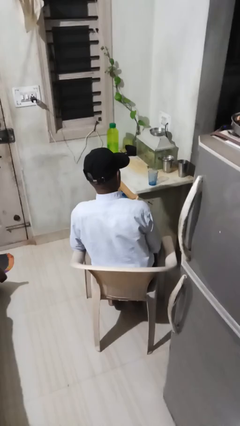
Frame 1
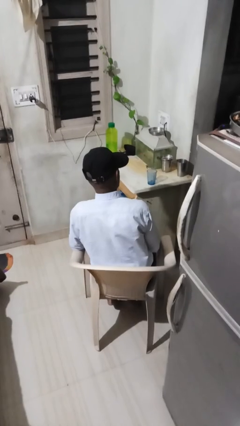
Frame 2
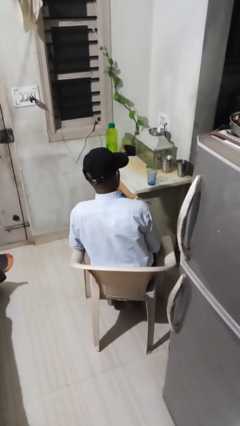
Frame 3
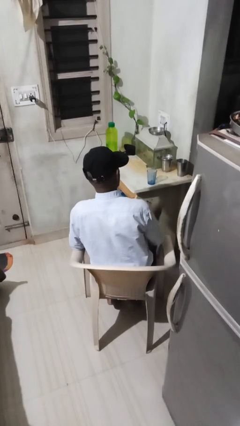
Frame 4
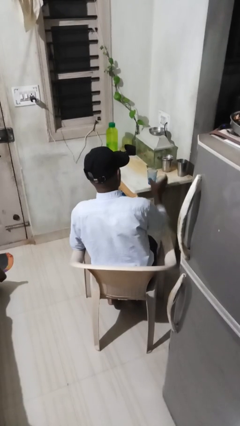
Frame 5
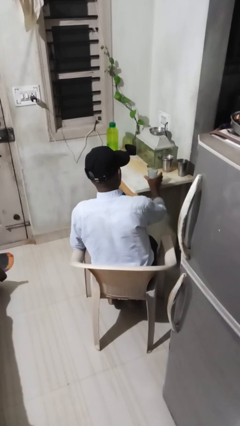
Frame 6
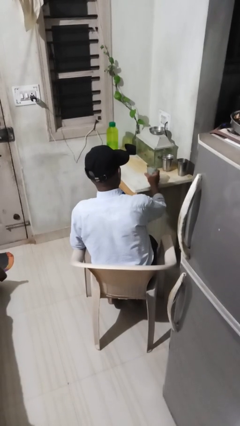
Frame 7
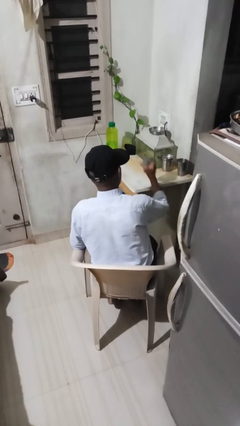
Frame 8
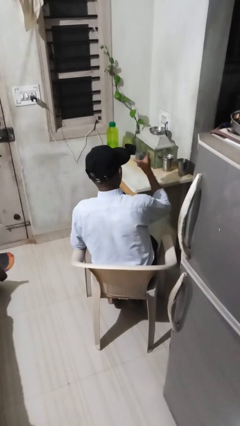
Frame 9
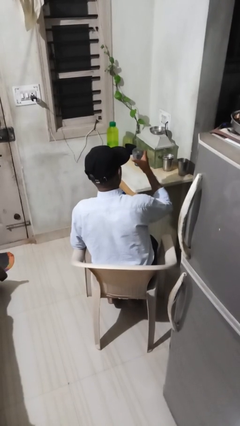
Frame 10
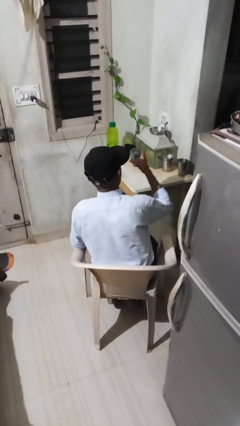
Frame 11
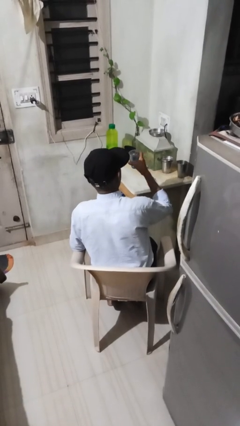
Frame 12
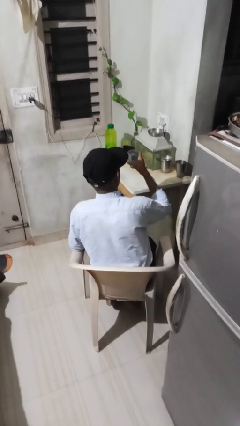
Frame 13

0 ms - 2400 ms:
person picks up object from table

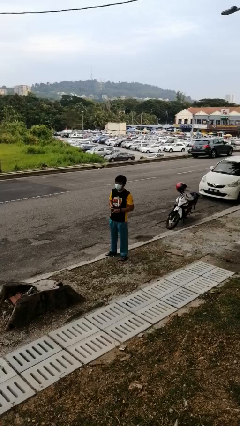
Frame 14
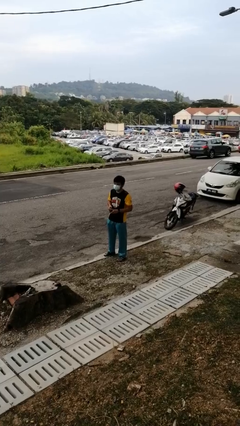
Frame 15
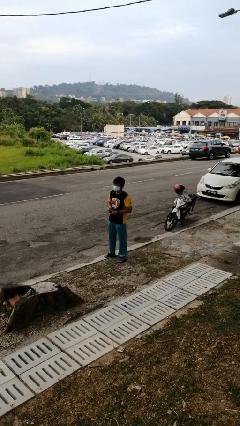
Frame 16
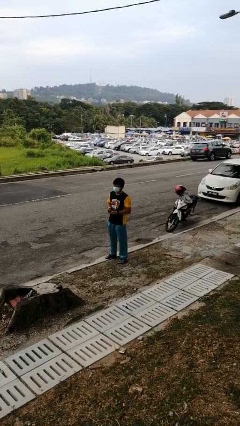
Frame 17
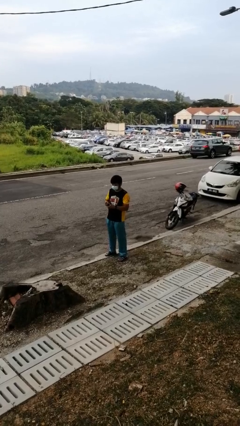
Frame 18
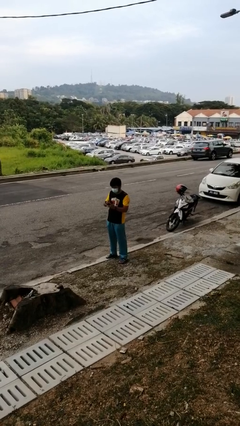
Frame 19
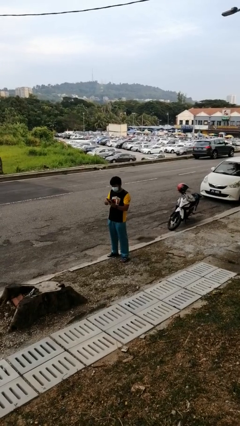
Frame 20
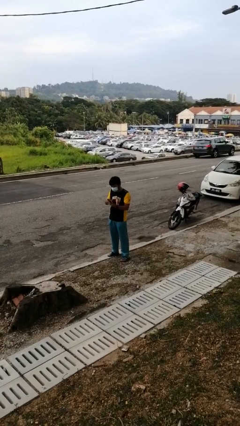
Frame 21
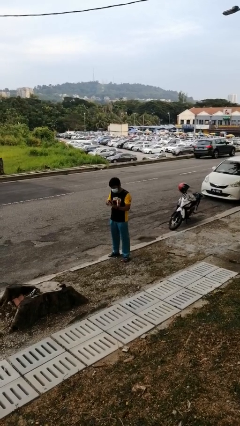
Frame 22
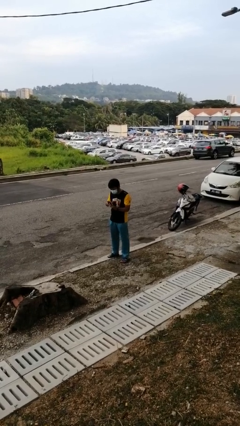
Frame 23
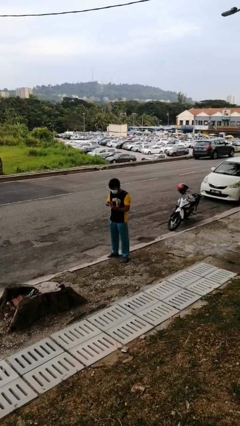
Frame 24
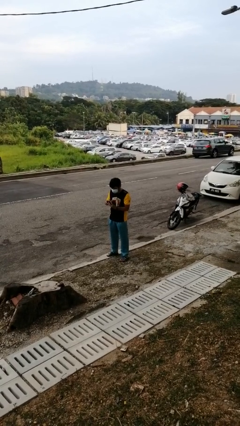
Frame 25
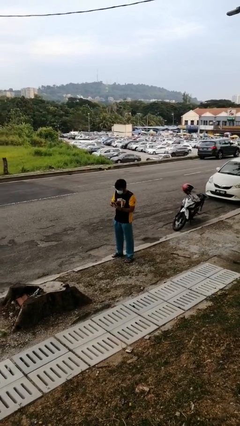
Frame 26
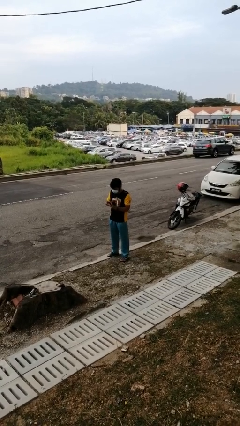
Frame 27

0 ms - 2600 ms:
person searches in purse

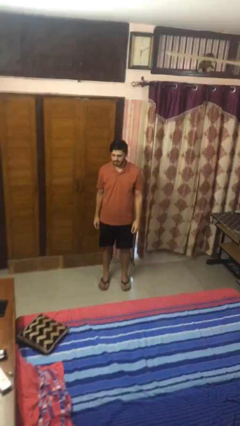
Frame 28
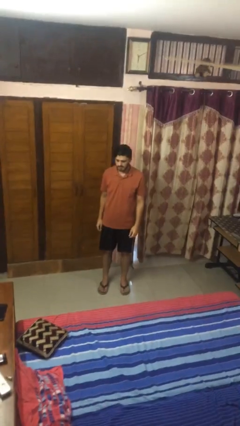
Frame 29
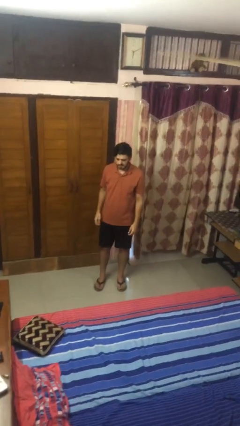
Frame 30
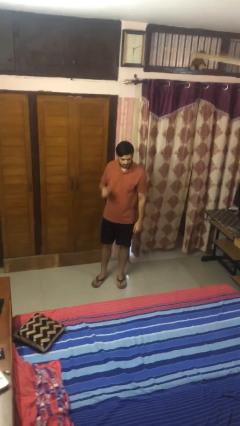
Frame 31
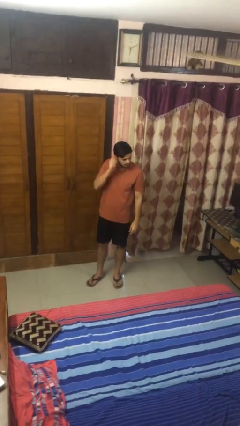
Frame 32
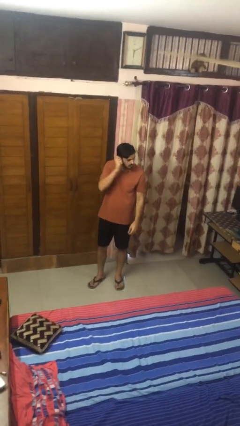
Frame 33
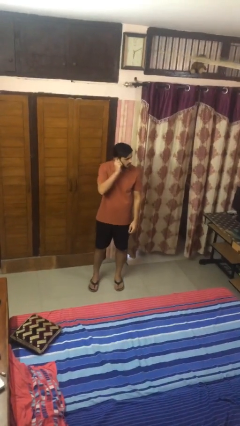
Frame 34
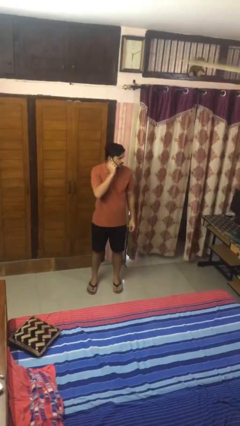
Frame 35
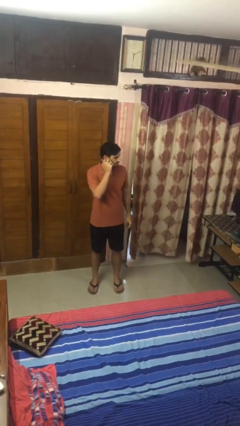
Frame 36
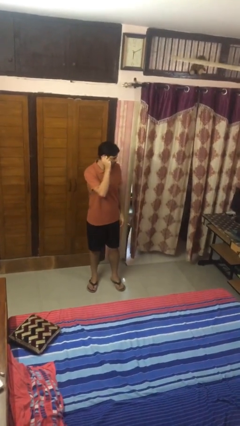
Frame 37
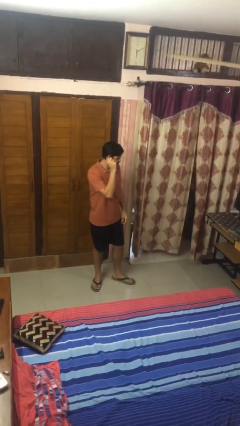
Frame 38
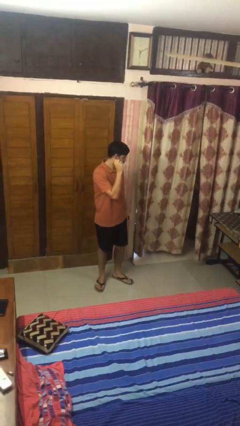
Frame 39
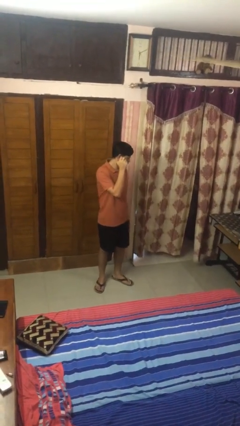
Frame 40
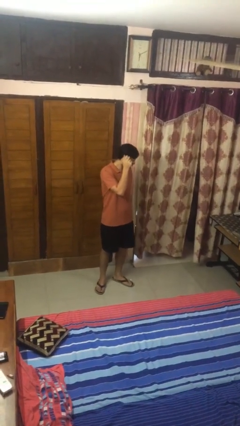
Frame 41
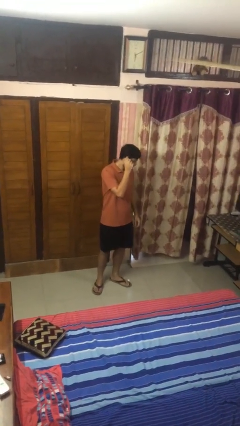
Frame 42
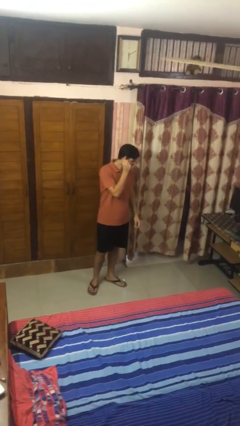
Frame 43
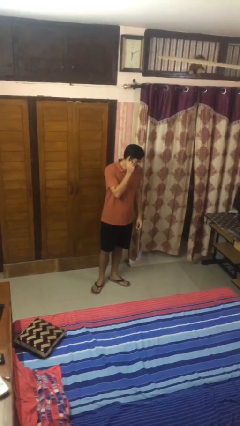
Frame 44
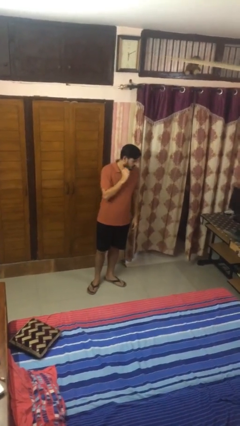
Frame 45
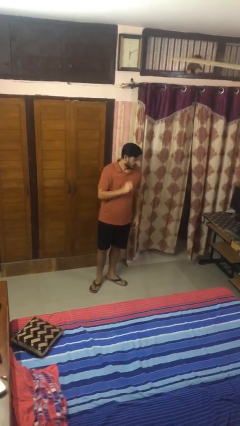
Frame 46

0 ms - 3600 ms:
person touches earlobe

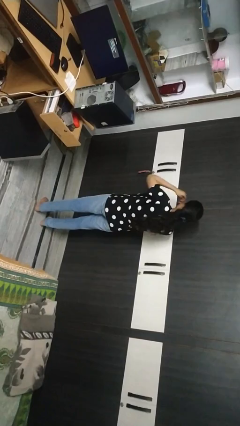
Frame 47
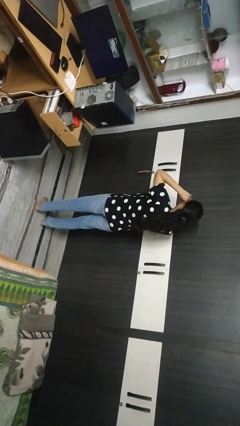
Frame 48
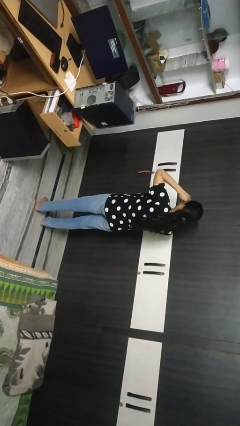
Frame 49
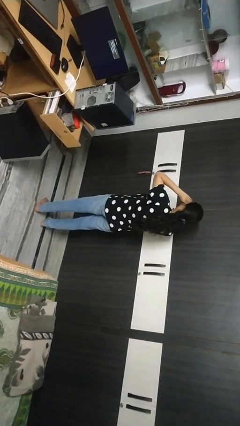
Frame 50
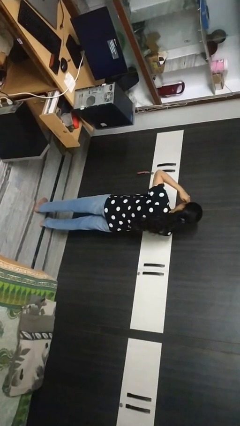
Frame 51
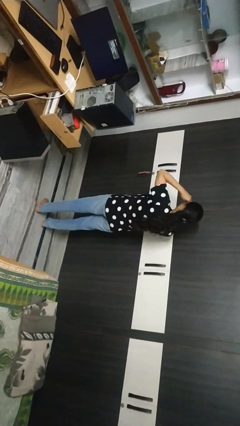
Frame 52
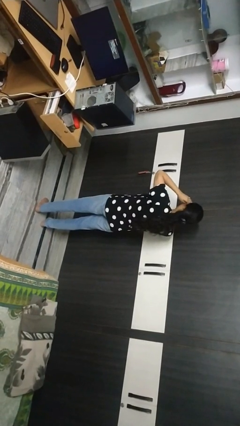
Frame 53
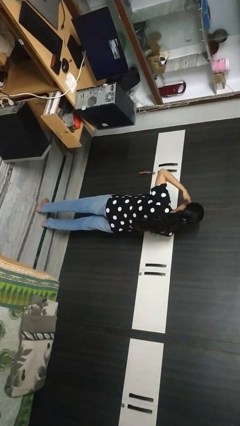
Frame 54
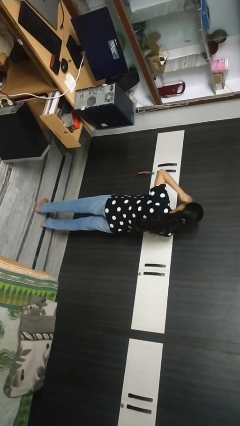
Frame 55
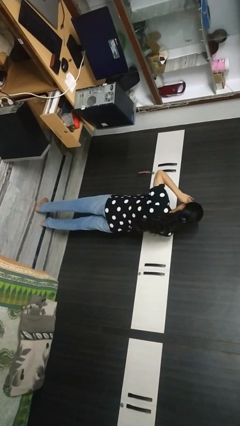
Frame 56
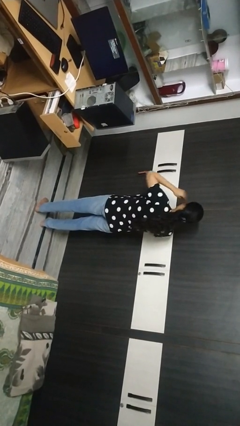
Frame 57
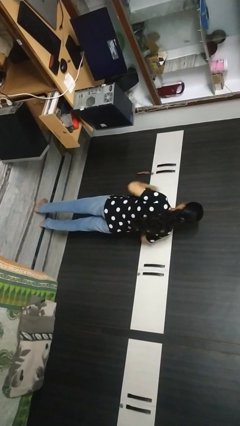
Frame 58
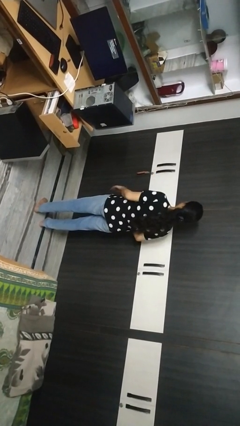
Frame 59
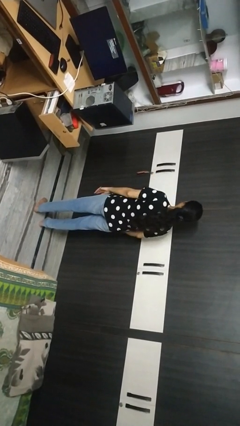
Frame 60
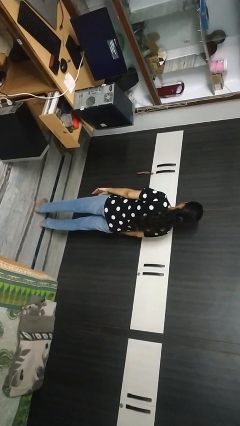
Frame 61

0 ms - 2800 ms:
person rubs eyes

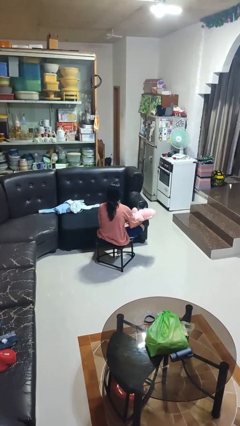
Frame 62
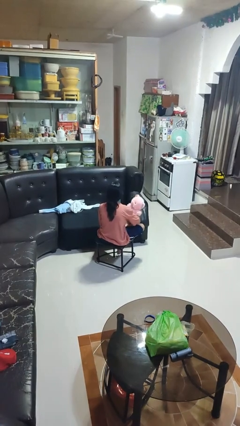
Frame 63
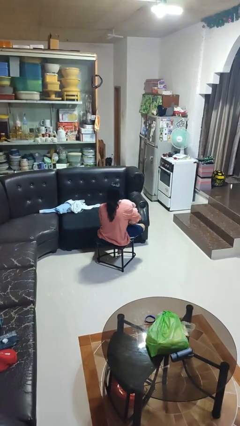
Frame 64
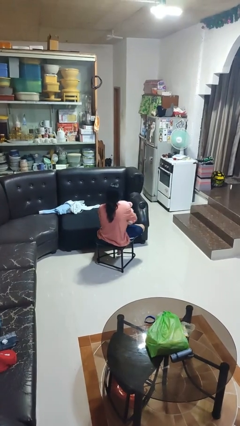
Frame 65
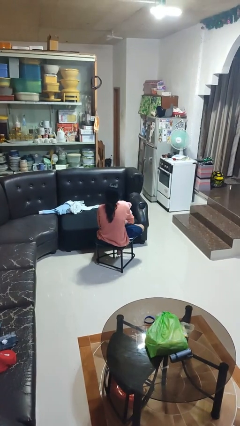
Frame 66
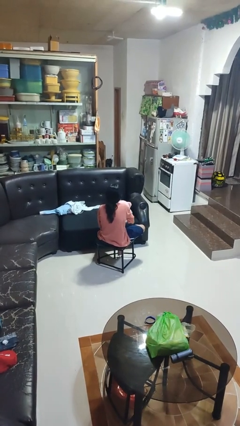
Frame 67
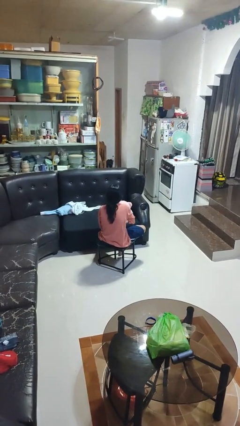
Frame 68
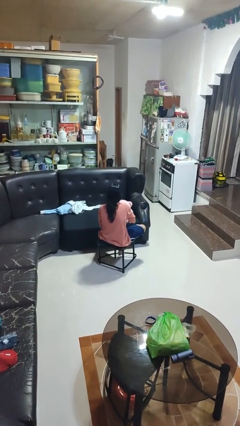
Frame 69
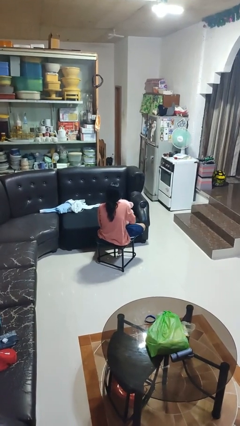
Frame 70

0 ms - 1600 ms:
person hugs stuffed animal

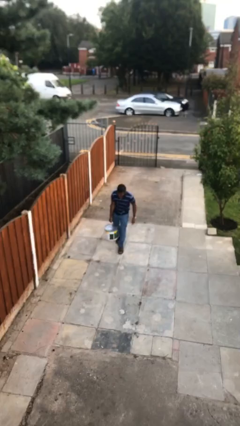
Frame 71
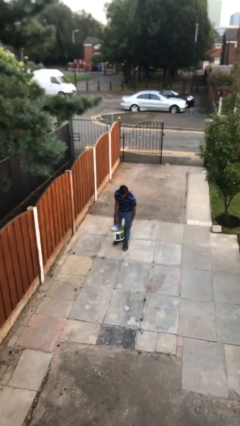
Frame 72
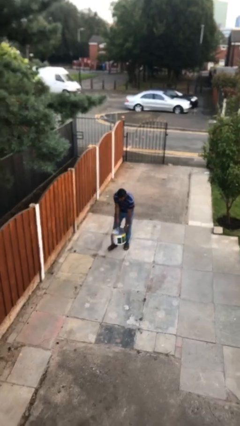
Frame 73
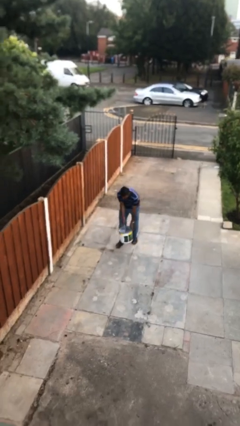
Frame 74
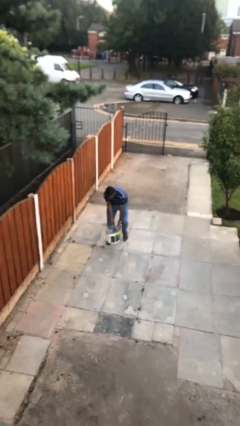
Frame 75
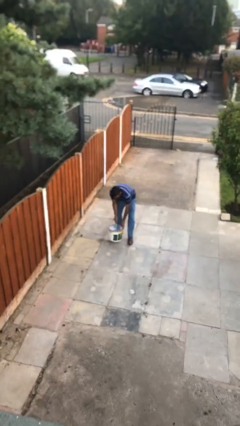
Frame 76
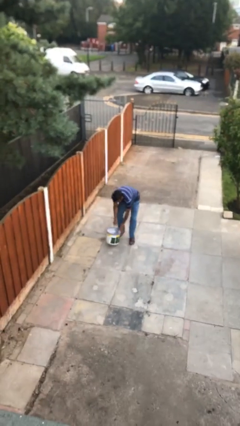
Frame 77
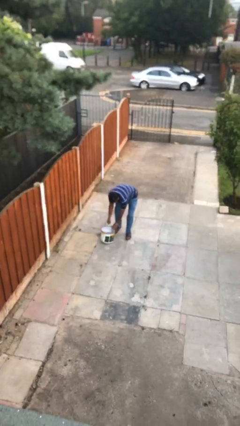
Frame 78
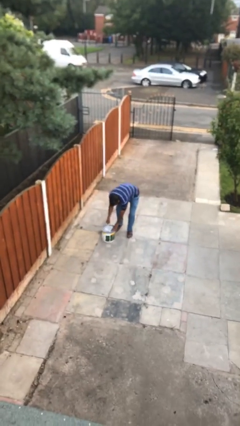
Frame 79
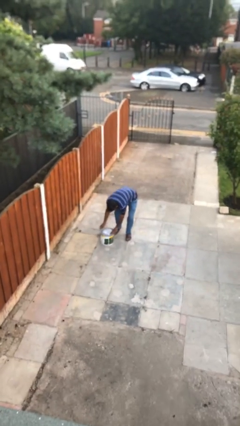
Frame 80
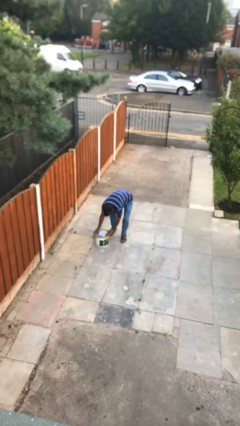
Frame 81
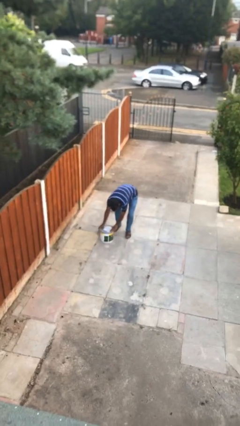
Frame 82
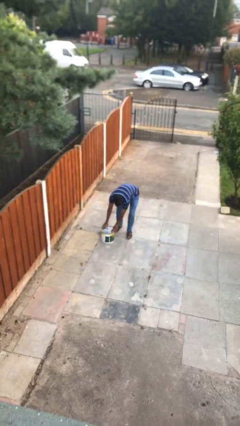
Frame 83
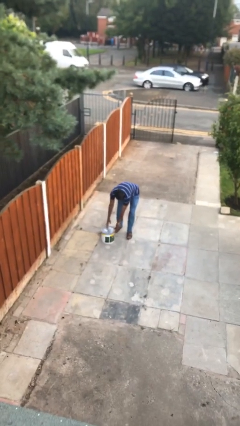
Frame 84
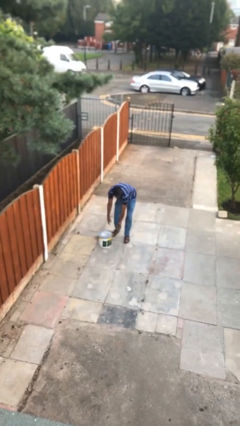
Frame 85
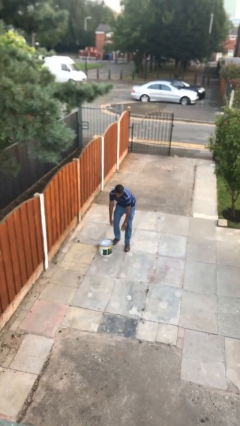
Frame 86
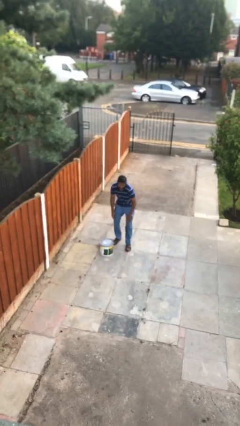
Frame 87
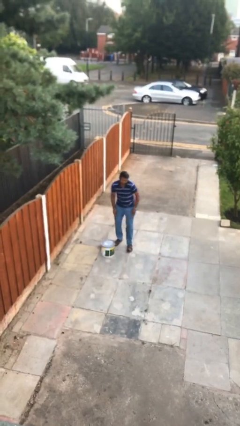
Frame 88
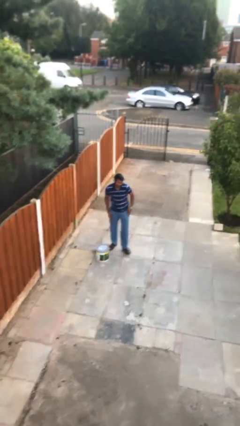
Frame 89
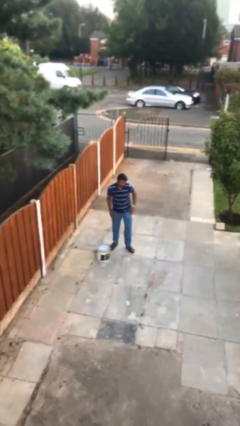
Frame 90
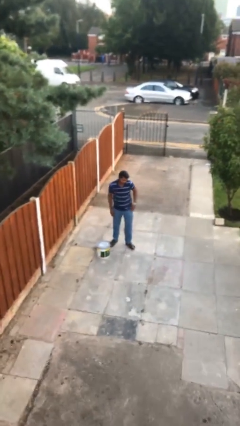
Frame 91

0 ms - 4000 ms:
person puts down object on floor
